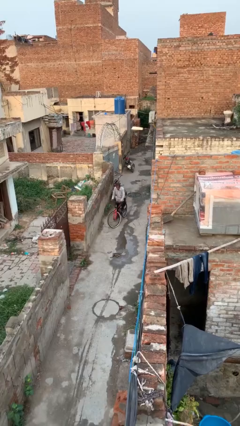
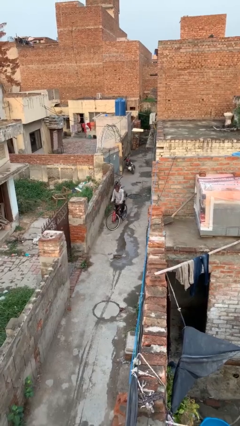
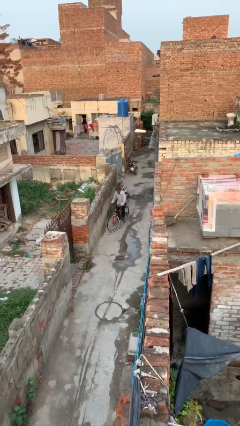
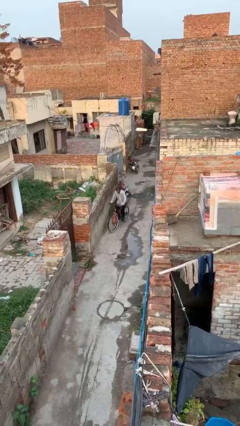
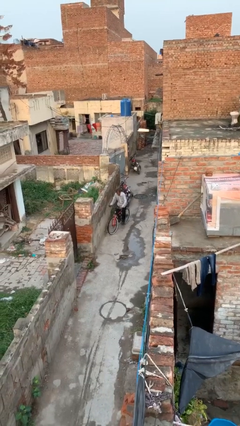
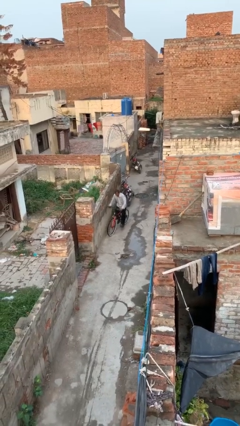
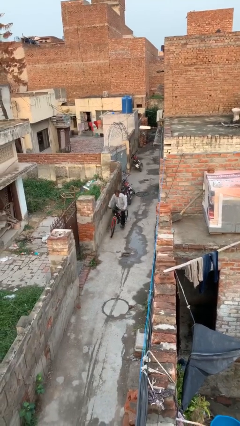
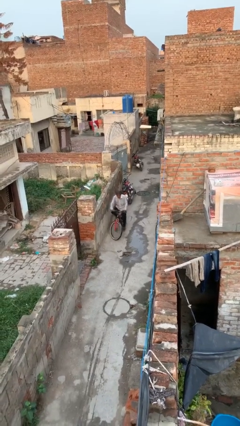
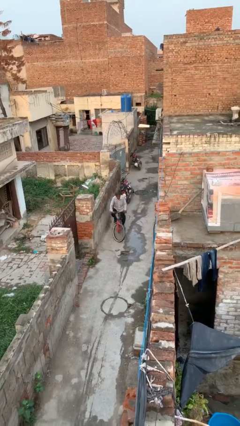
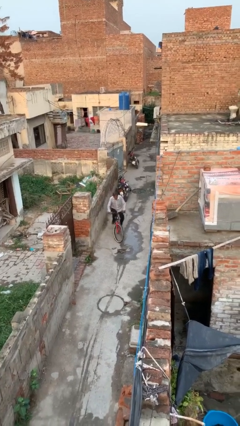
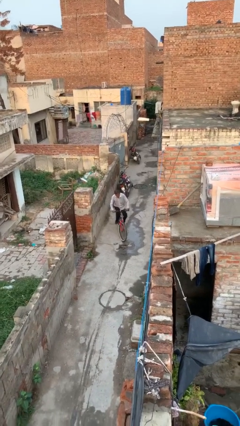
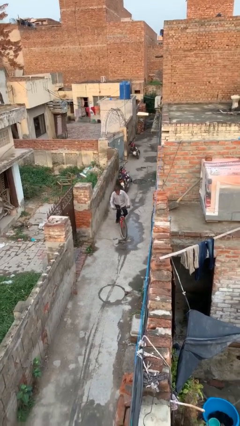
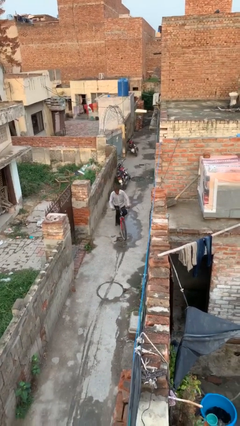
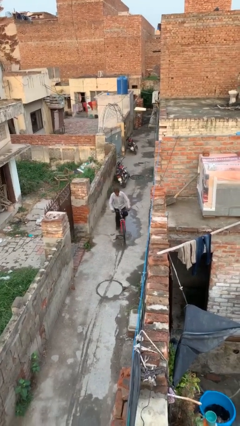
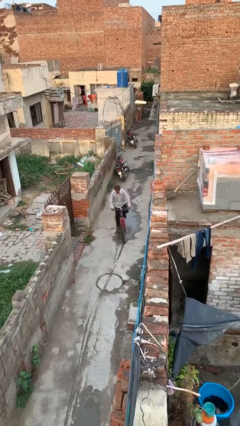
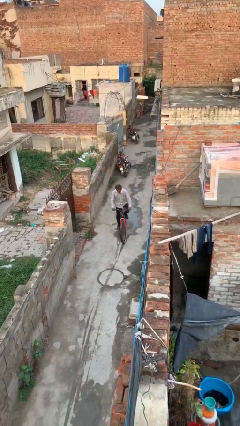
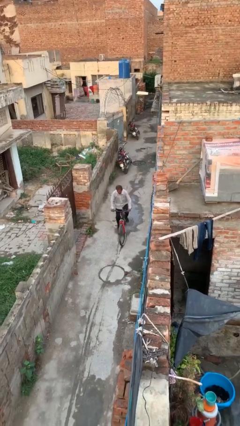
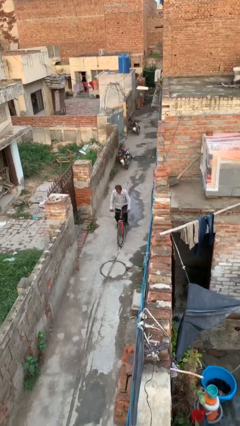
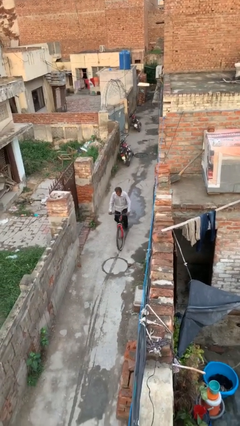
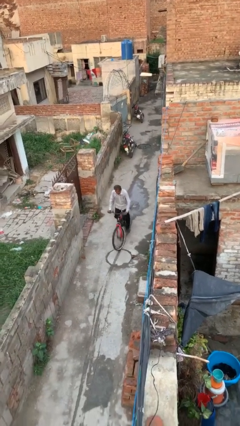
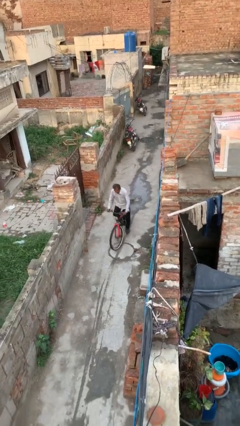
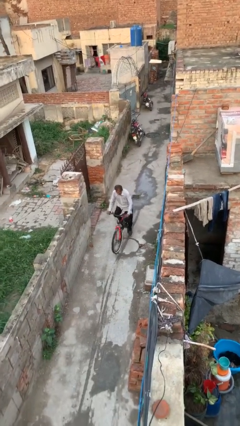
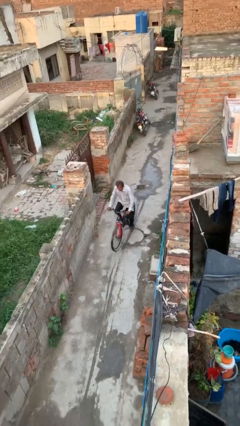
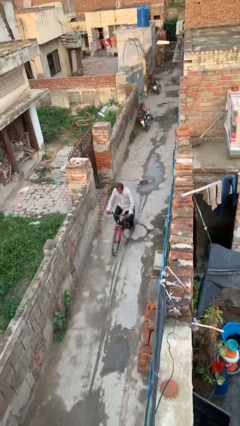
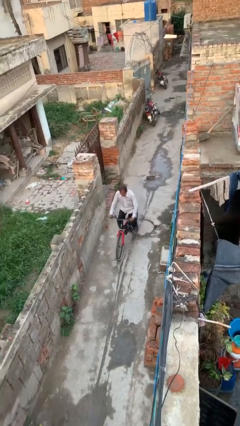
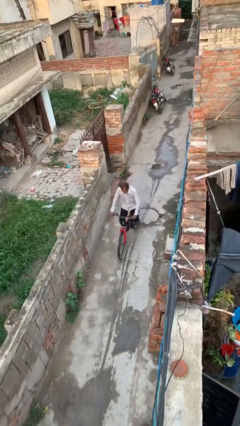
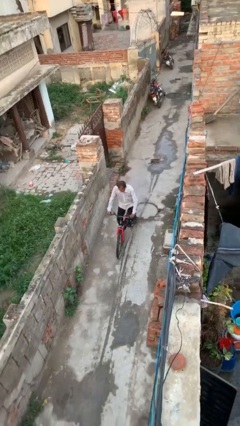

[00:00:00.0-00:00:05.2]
person rides bicycle

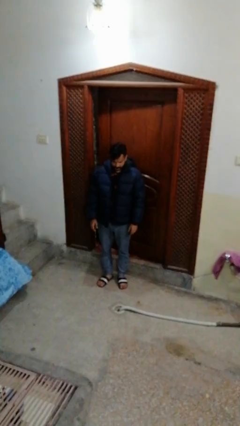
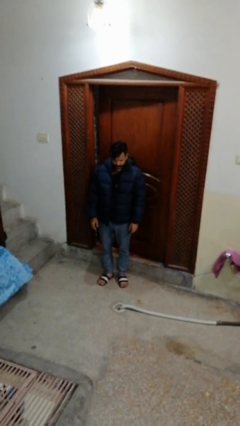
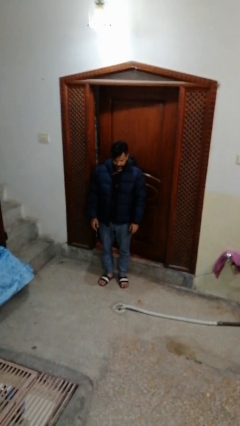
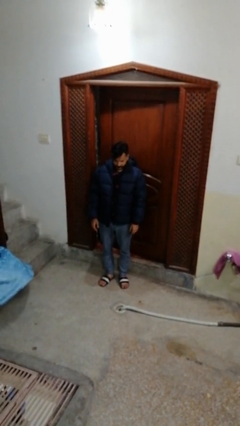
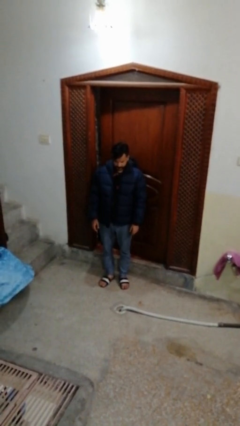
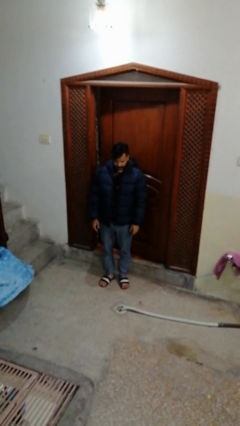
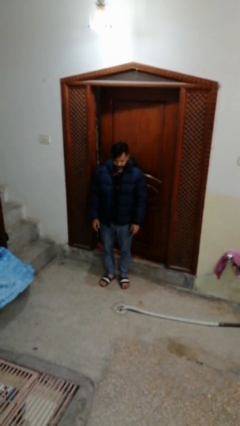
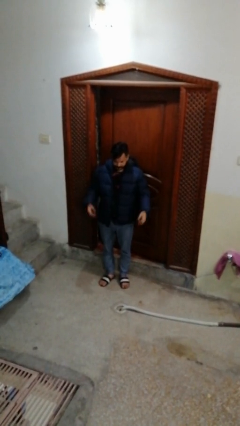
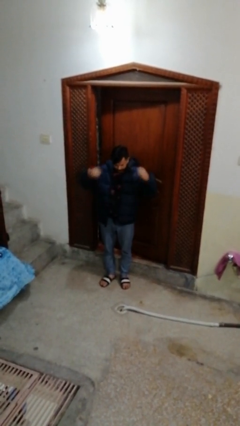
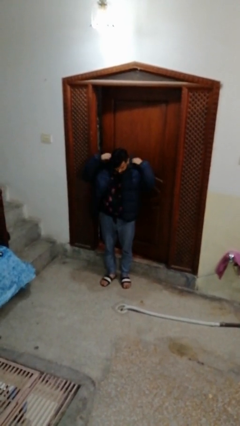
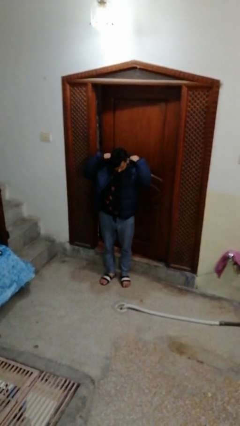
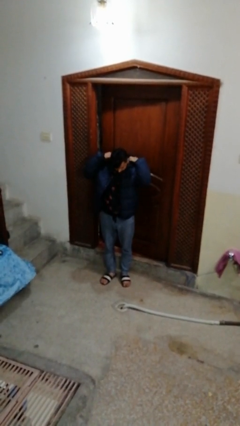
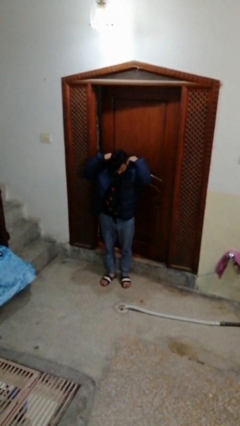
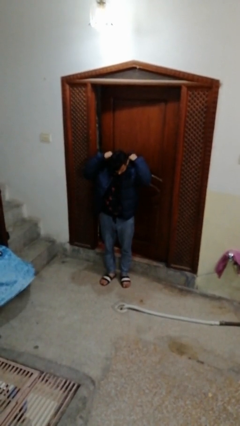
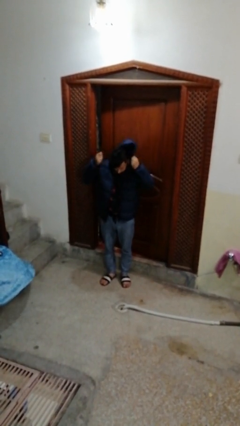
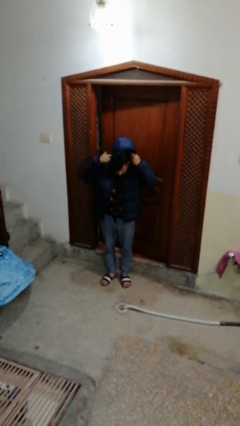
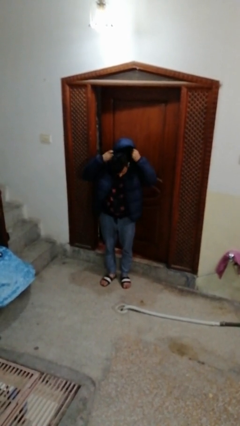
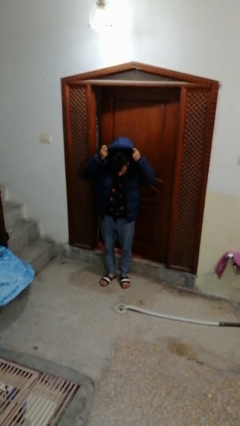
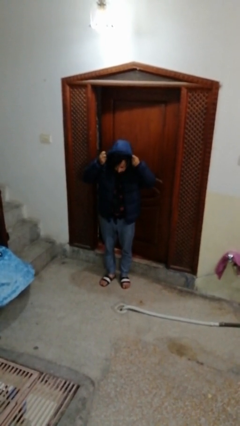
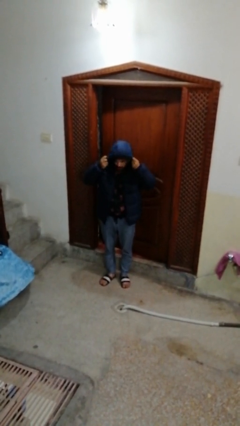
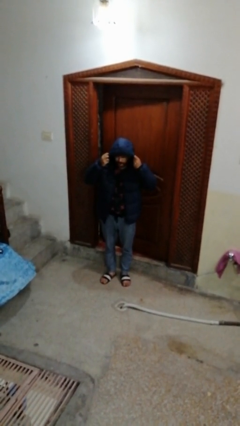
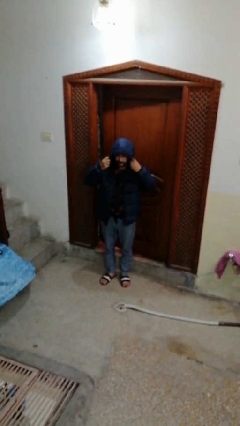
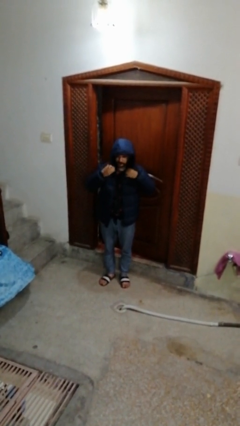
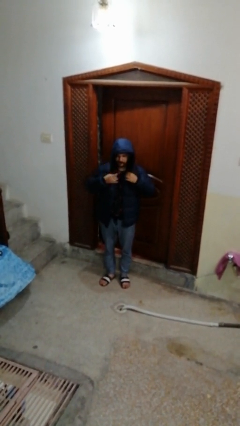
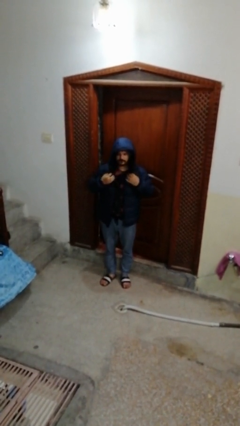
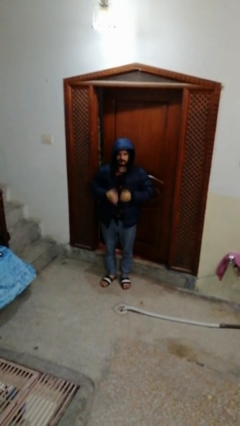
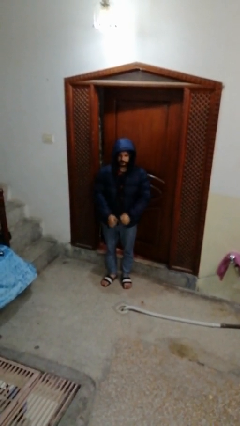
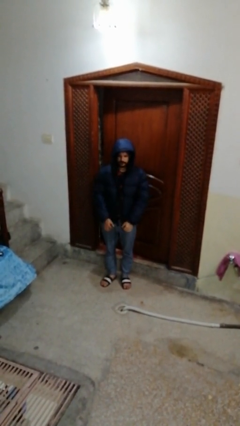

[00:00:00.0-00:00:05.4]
person puts on hoodie

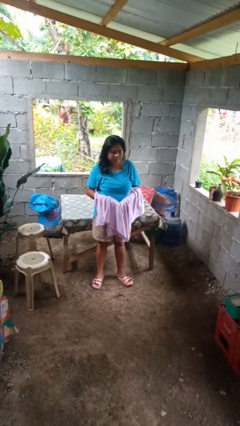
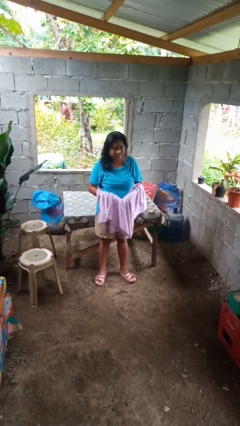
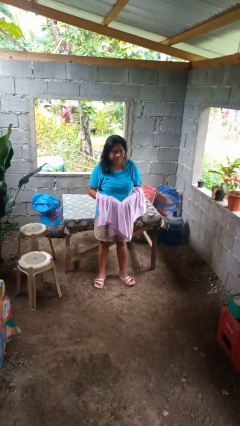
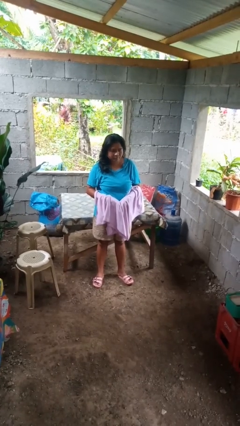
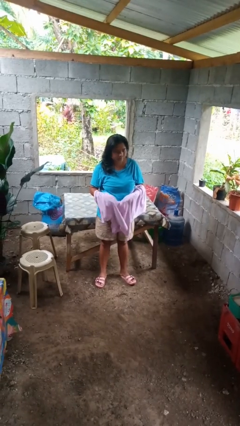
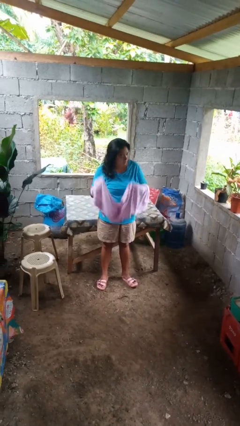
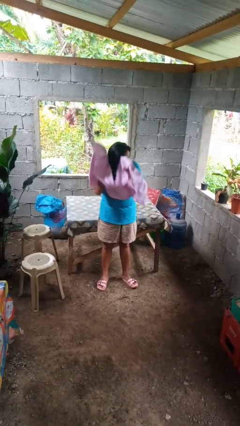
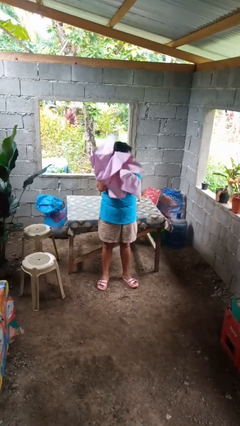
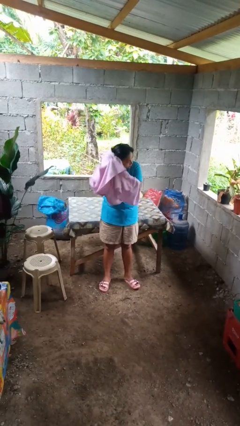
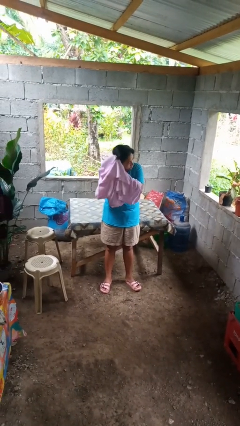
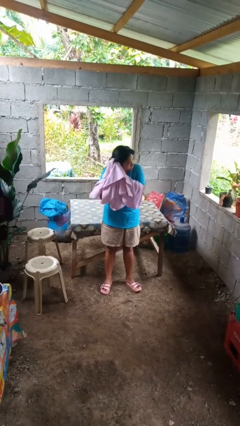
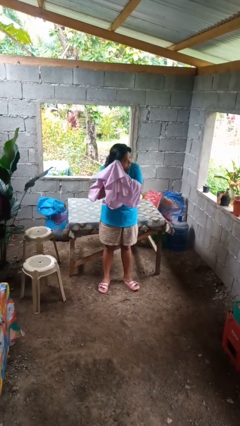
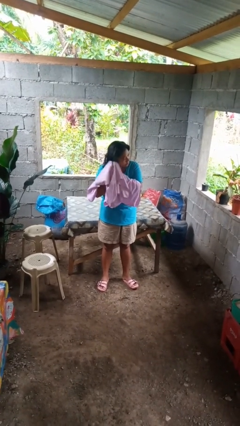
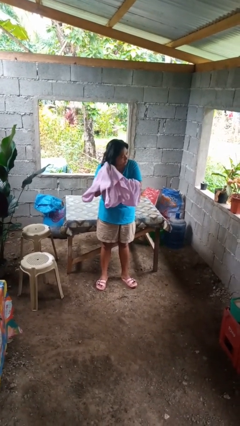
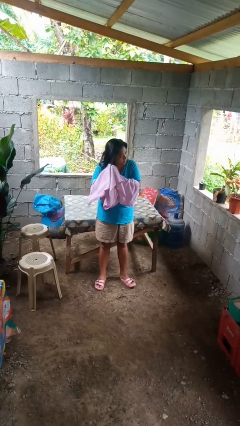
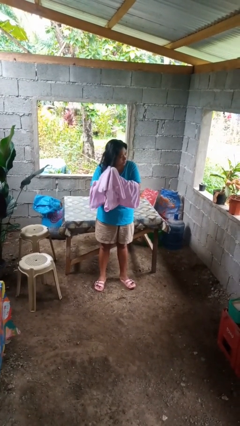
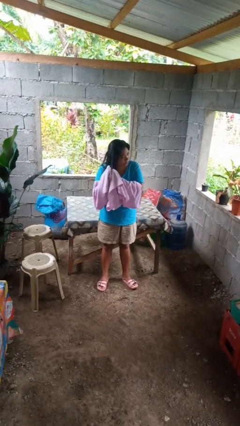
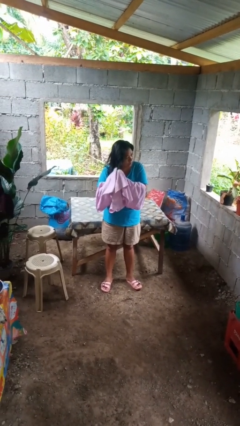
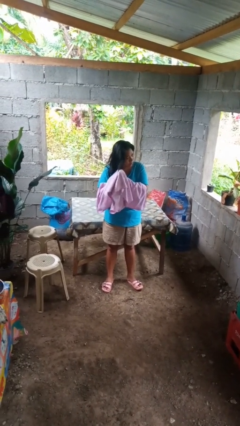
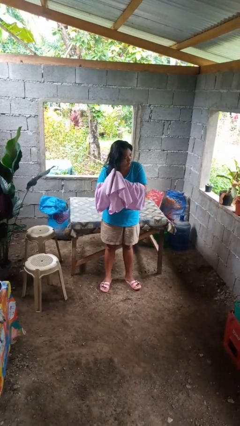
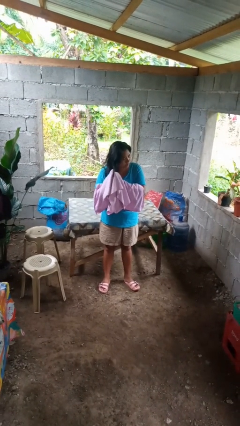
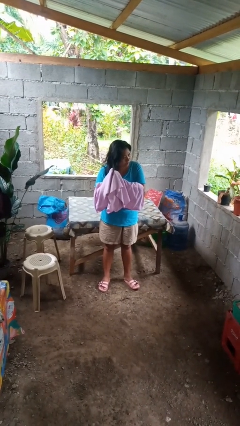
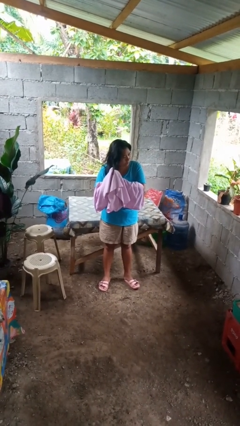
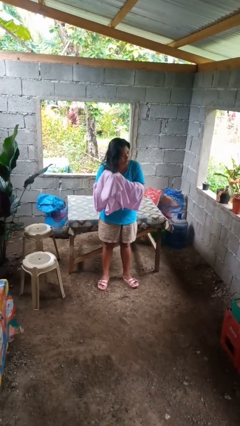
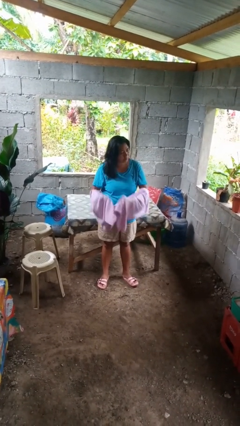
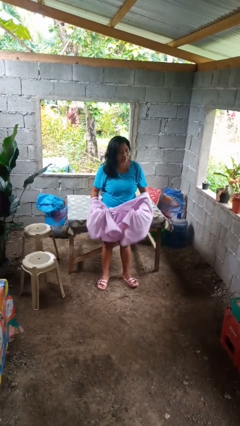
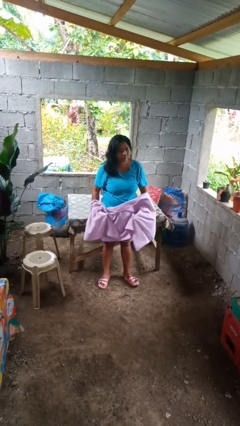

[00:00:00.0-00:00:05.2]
person dries hair with towel

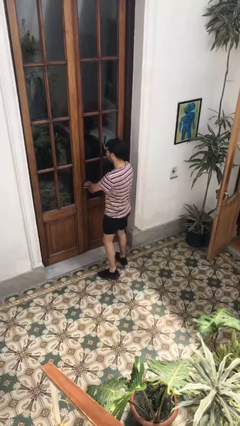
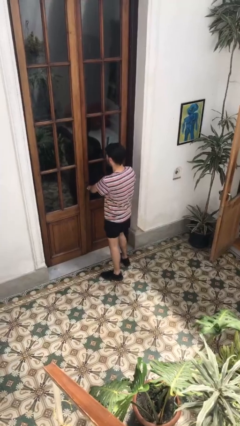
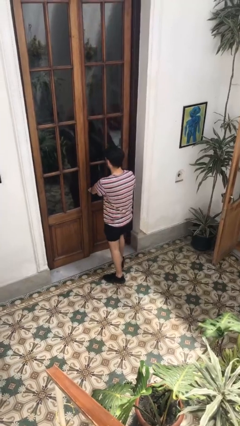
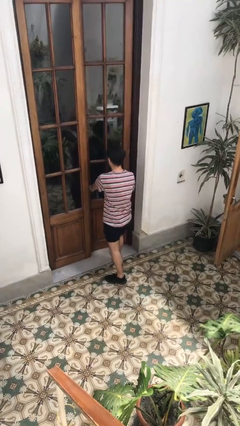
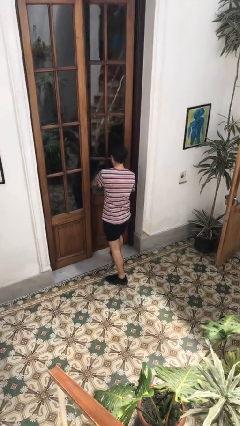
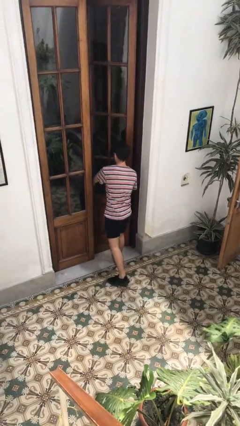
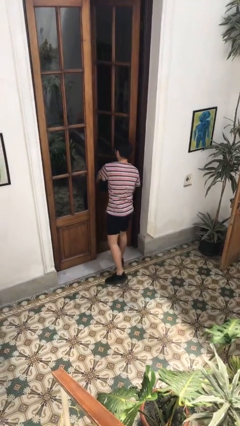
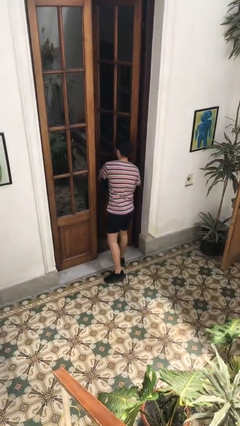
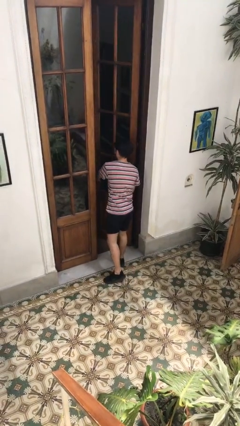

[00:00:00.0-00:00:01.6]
person opens facility door
